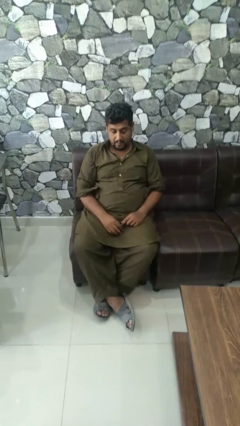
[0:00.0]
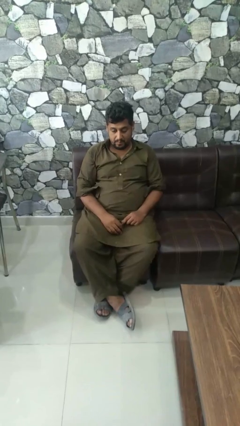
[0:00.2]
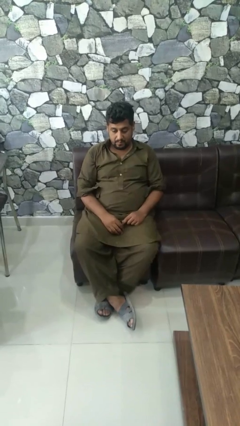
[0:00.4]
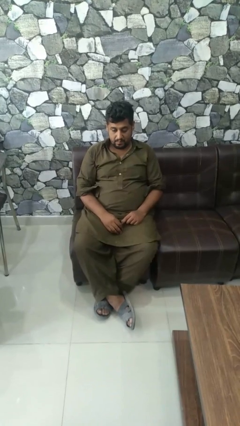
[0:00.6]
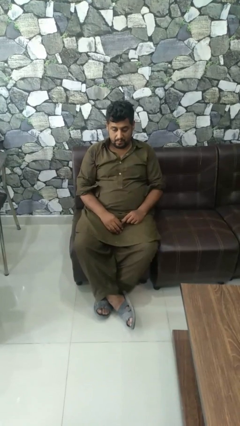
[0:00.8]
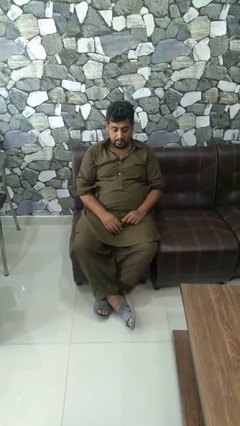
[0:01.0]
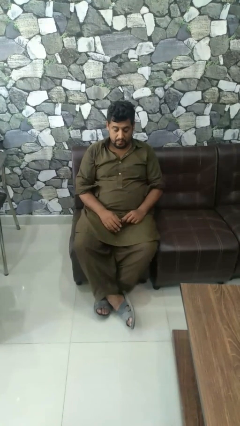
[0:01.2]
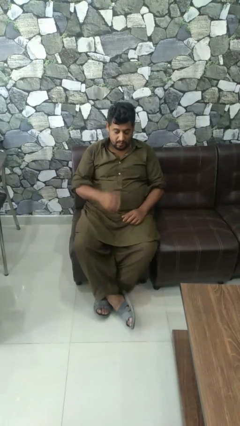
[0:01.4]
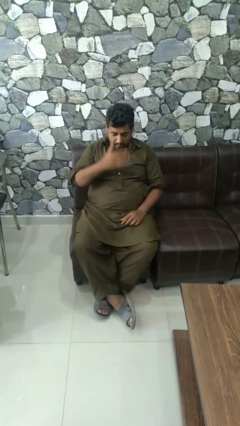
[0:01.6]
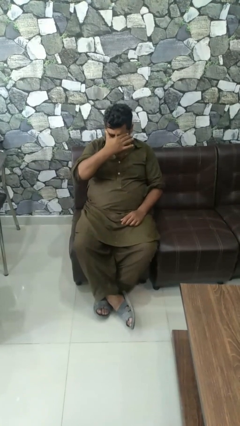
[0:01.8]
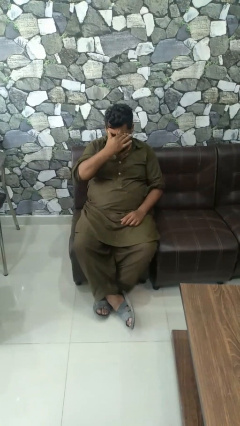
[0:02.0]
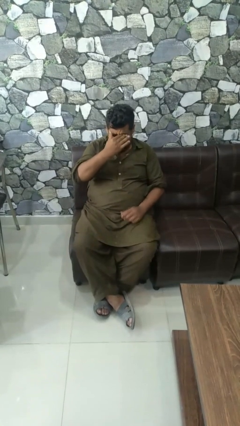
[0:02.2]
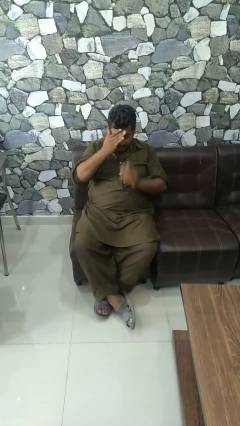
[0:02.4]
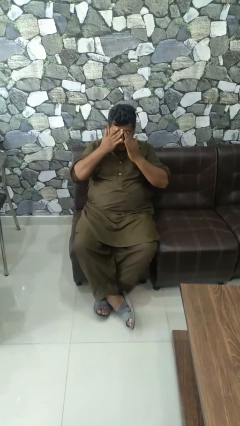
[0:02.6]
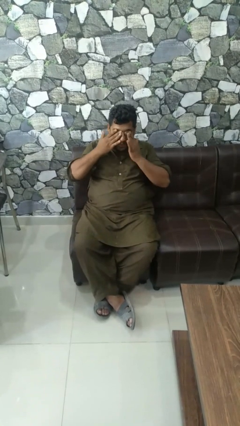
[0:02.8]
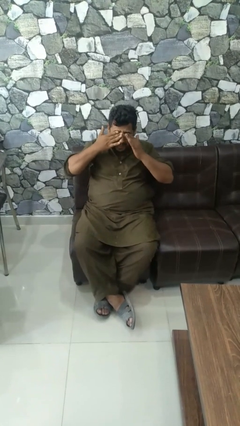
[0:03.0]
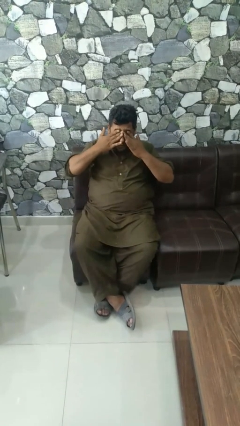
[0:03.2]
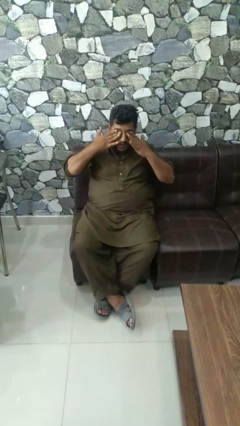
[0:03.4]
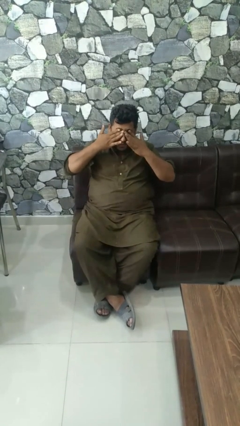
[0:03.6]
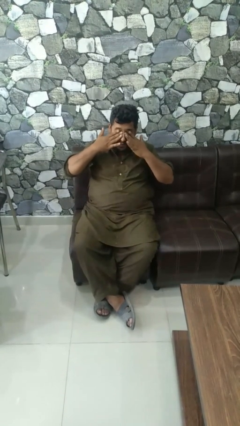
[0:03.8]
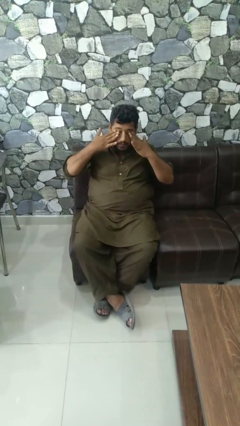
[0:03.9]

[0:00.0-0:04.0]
person rubs eyes

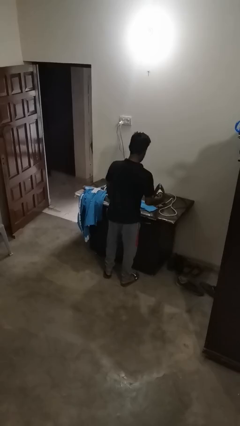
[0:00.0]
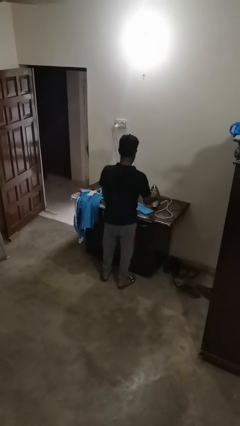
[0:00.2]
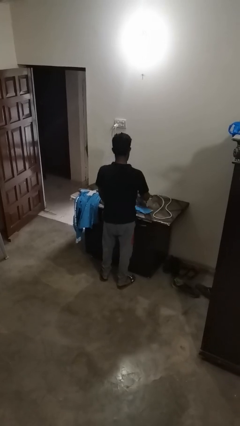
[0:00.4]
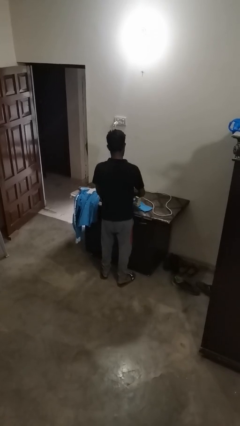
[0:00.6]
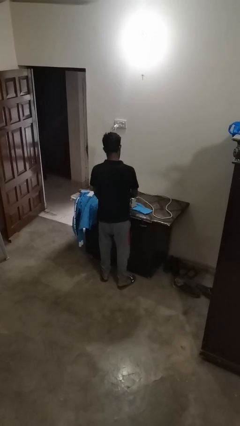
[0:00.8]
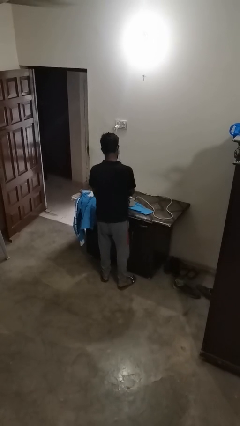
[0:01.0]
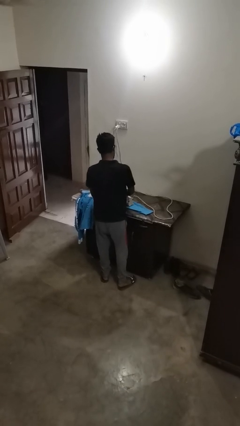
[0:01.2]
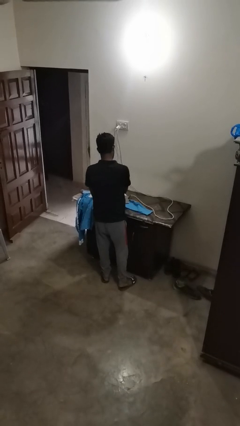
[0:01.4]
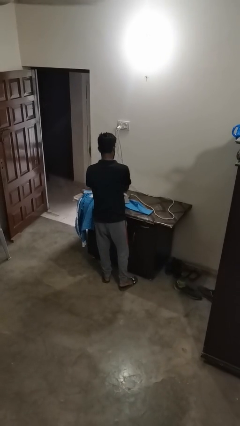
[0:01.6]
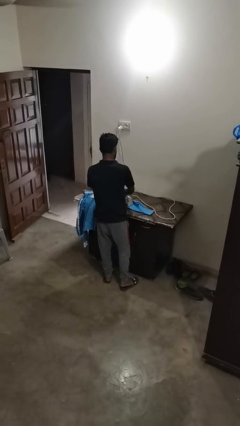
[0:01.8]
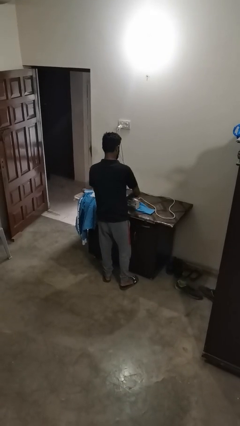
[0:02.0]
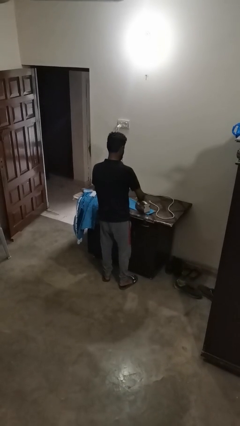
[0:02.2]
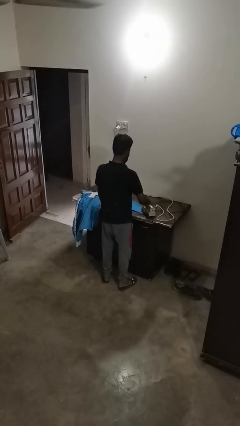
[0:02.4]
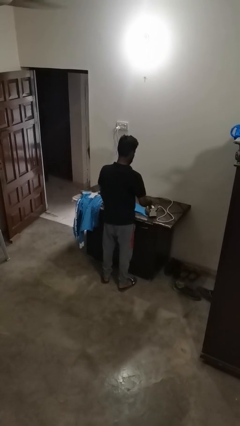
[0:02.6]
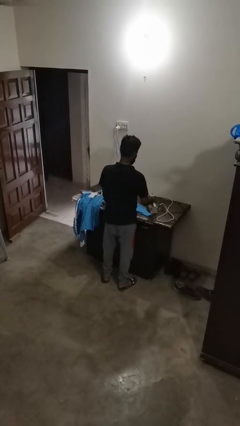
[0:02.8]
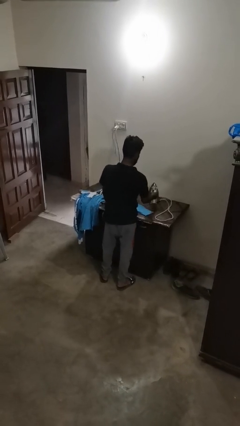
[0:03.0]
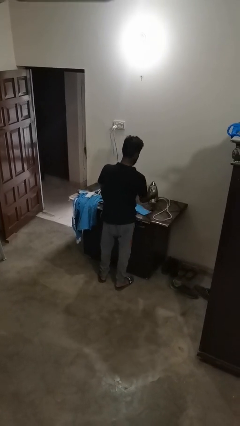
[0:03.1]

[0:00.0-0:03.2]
person irons clothes

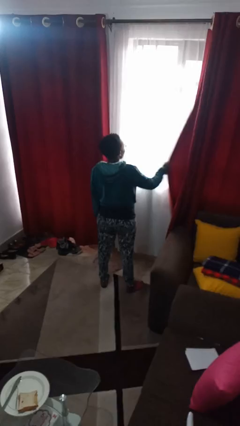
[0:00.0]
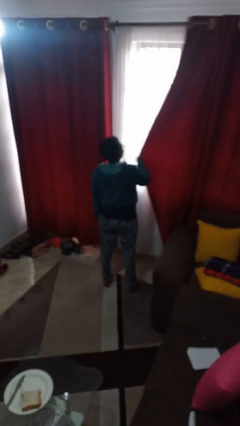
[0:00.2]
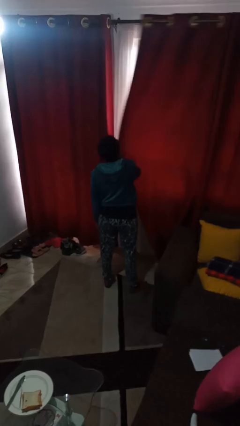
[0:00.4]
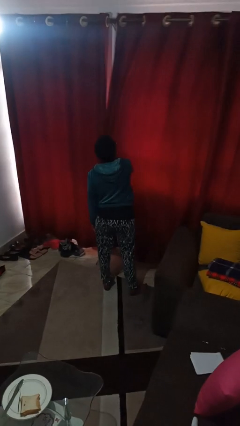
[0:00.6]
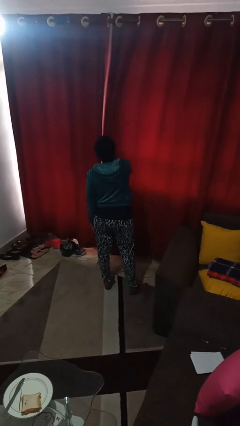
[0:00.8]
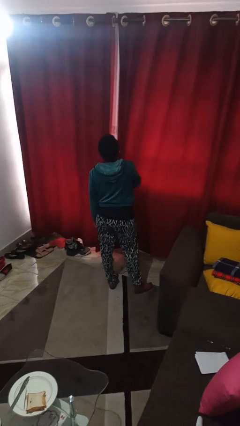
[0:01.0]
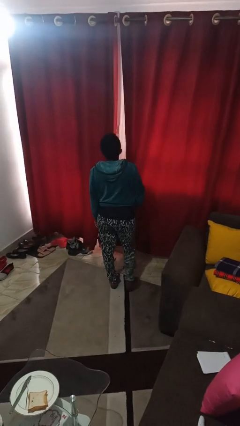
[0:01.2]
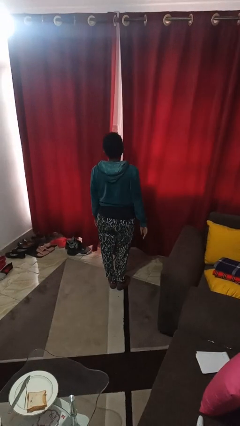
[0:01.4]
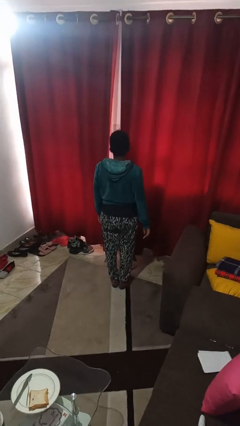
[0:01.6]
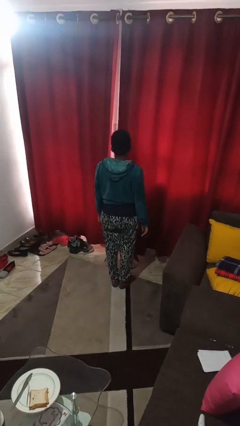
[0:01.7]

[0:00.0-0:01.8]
person closes curtains

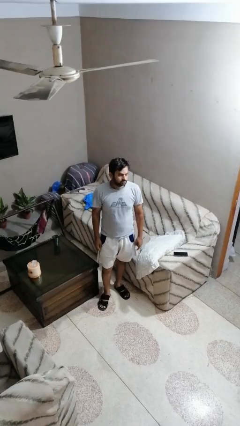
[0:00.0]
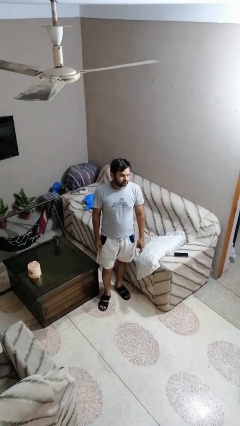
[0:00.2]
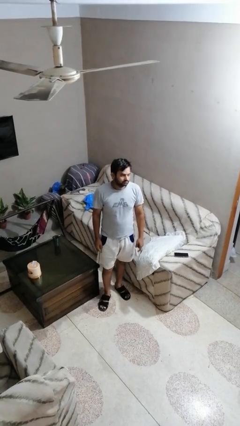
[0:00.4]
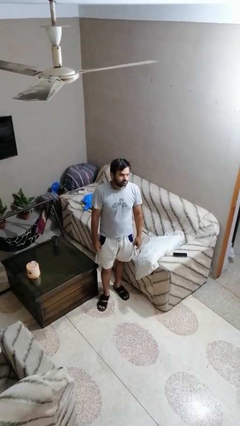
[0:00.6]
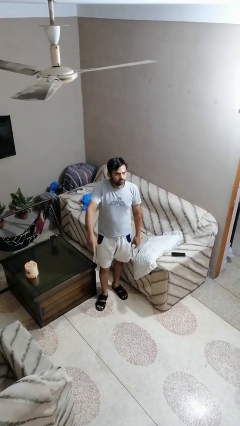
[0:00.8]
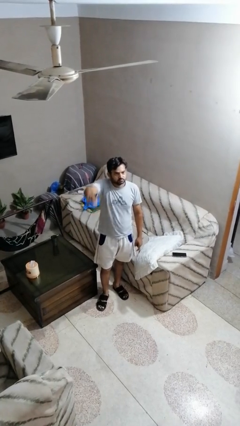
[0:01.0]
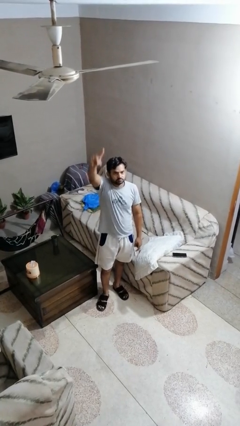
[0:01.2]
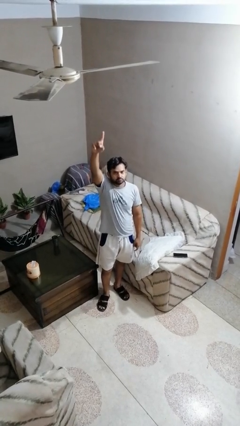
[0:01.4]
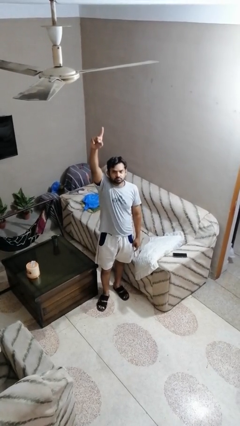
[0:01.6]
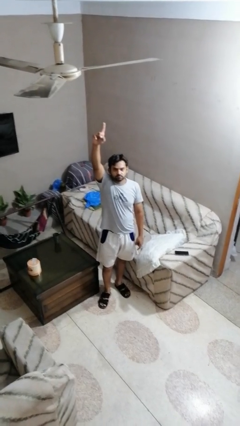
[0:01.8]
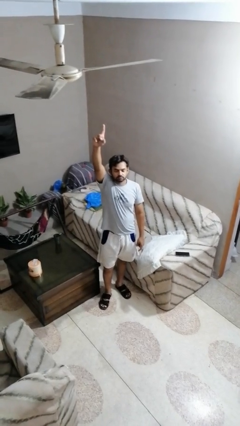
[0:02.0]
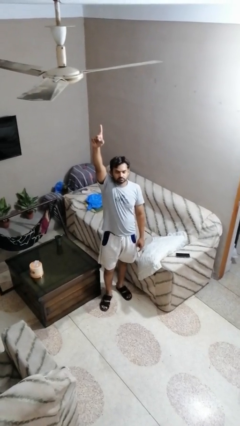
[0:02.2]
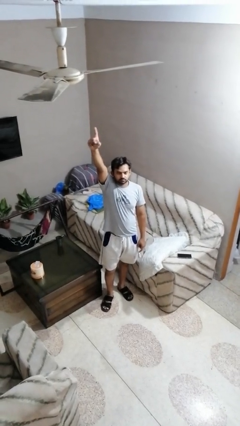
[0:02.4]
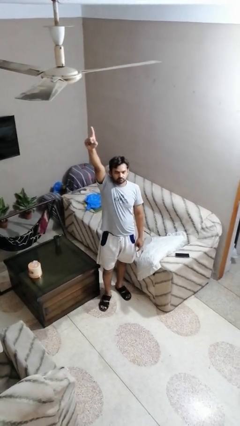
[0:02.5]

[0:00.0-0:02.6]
person gestures number one

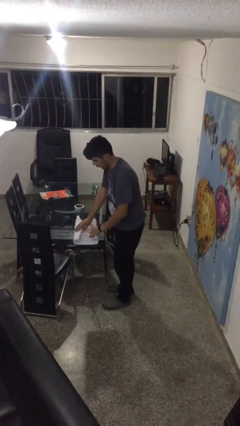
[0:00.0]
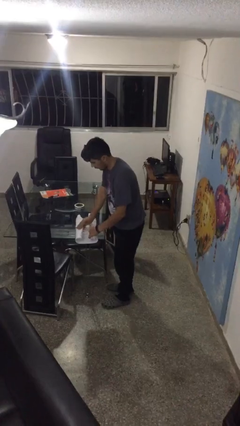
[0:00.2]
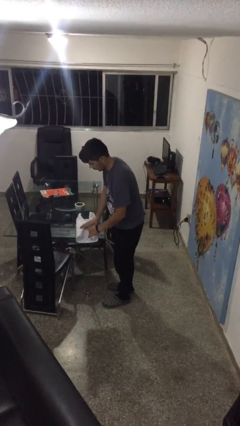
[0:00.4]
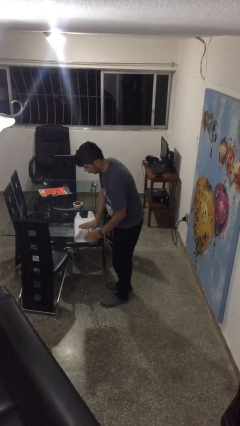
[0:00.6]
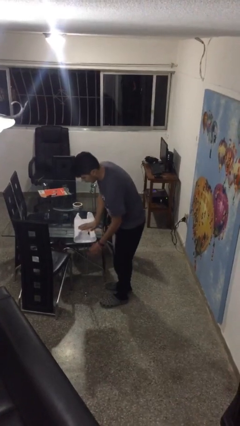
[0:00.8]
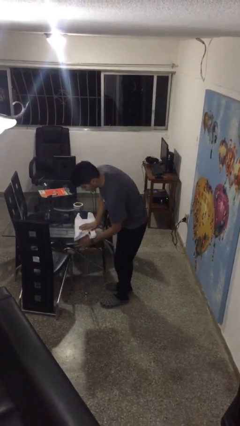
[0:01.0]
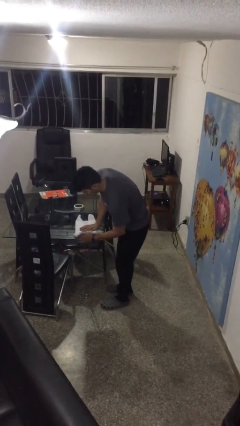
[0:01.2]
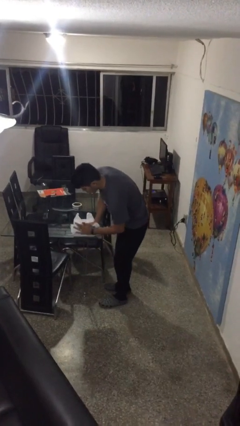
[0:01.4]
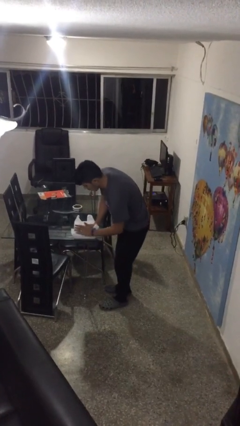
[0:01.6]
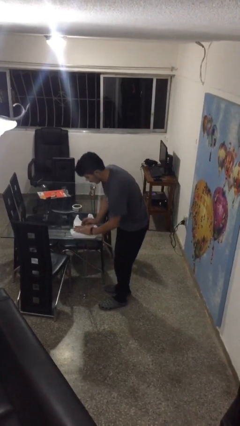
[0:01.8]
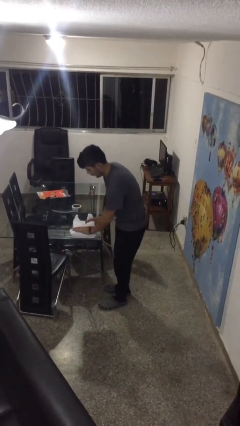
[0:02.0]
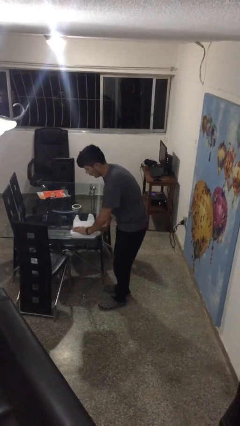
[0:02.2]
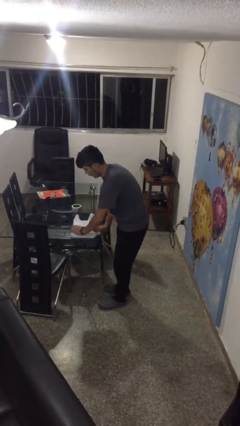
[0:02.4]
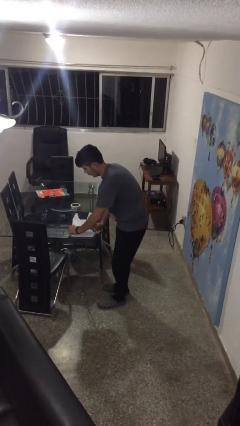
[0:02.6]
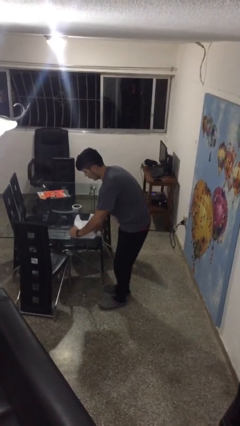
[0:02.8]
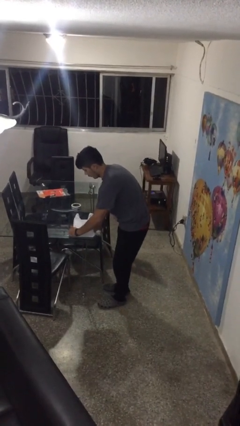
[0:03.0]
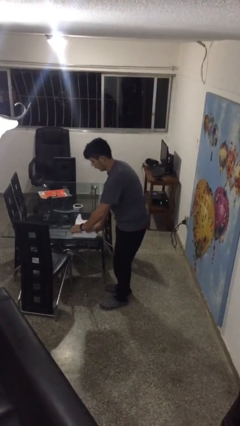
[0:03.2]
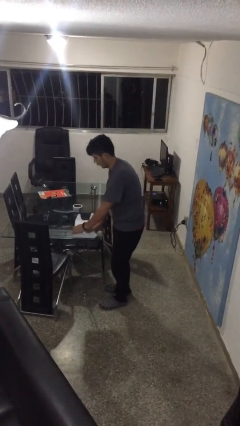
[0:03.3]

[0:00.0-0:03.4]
person wraps box

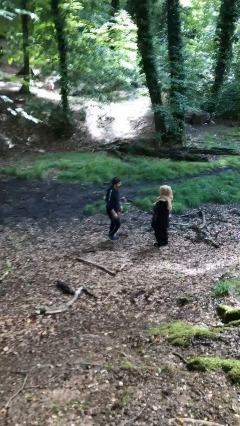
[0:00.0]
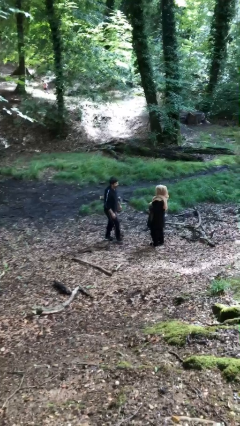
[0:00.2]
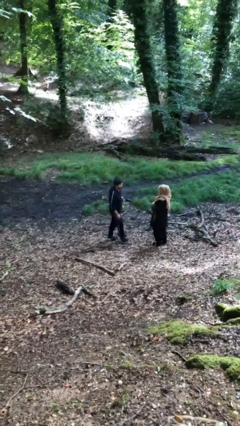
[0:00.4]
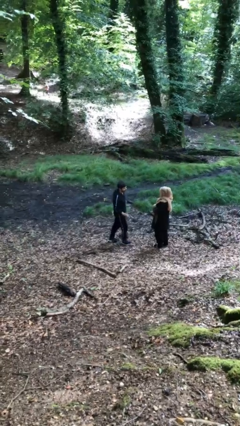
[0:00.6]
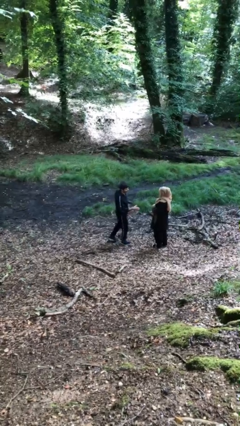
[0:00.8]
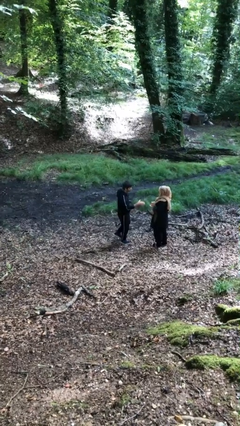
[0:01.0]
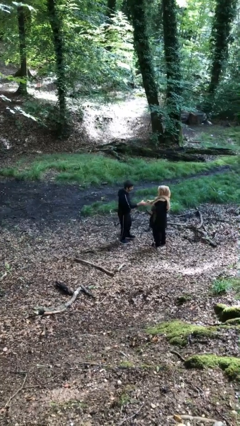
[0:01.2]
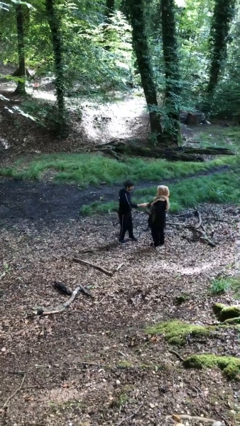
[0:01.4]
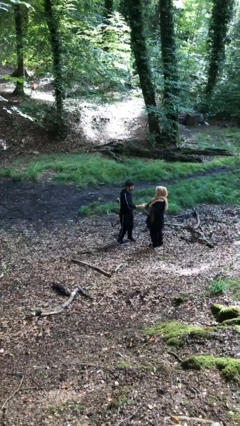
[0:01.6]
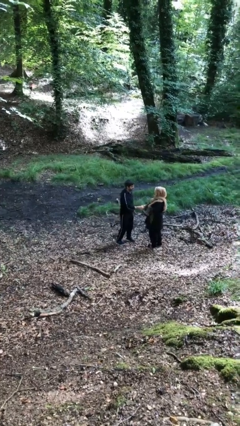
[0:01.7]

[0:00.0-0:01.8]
person shakes hand

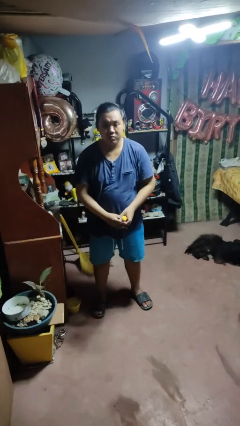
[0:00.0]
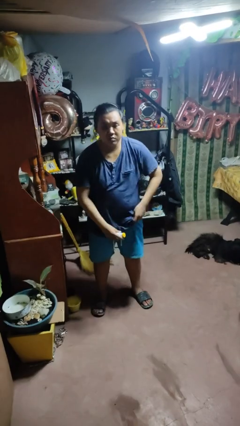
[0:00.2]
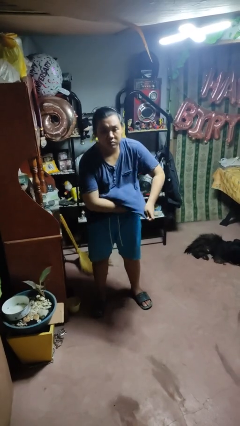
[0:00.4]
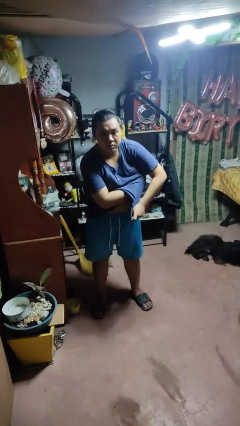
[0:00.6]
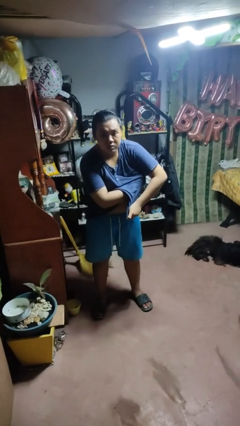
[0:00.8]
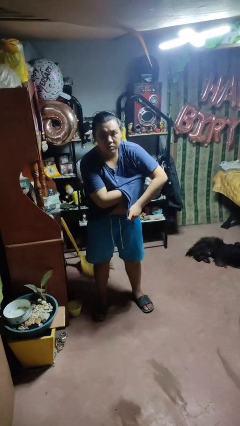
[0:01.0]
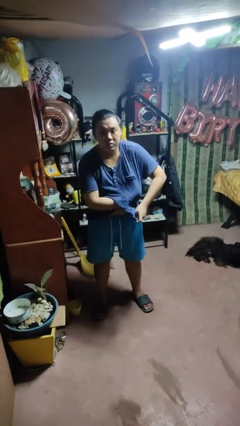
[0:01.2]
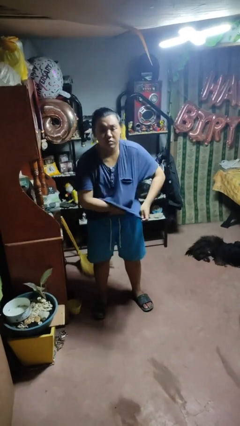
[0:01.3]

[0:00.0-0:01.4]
person applies deodorant
